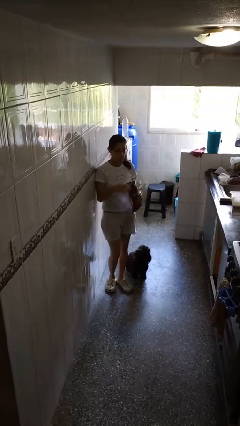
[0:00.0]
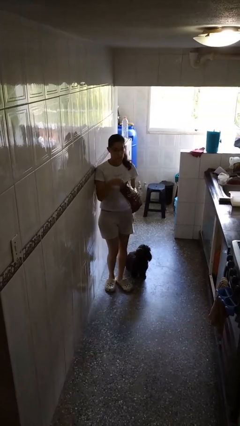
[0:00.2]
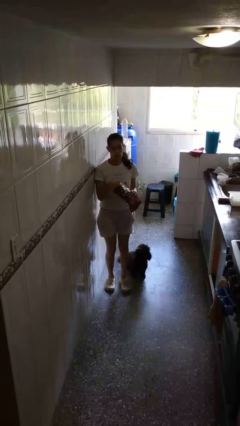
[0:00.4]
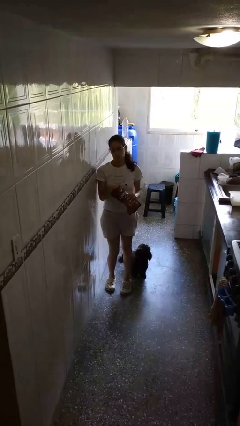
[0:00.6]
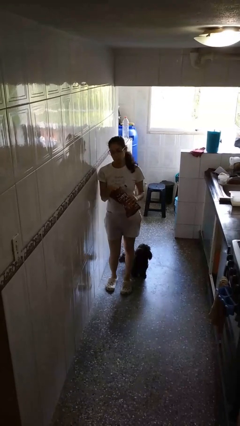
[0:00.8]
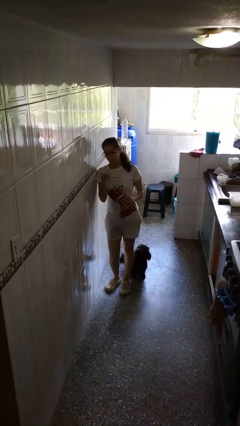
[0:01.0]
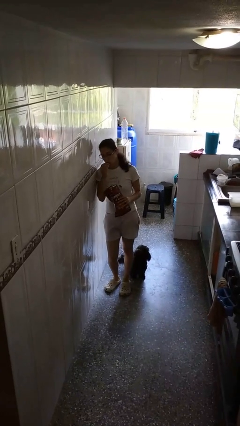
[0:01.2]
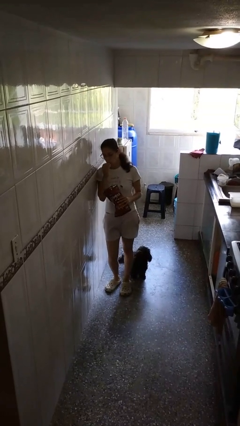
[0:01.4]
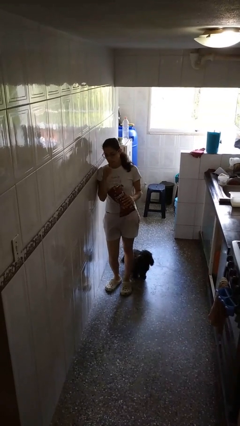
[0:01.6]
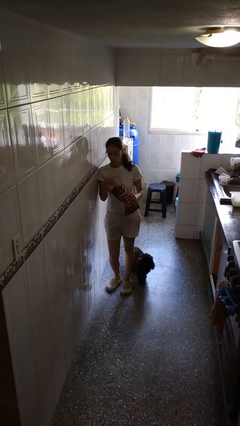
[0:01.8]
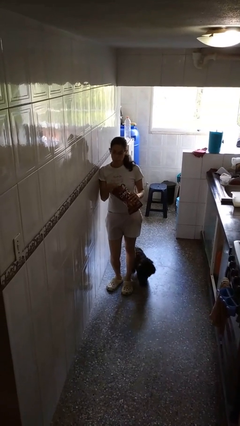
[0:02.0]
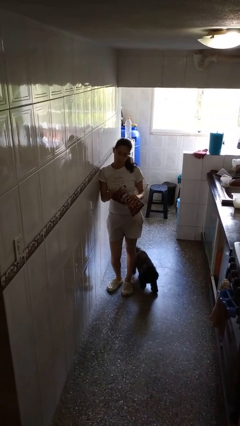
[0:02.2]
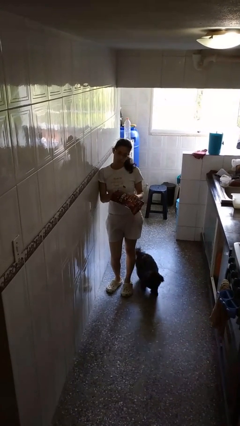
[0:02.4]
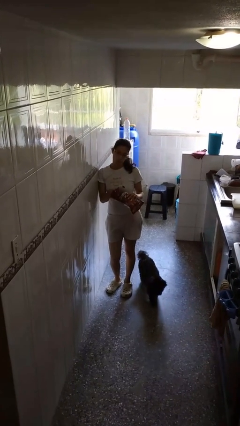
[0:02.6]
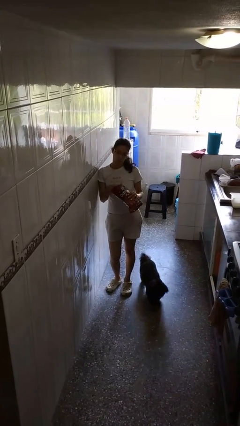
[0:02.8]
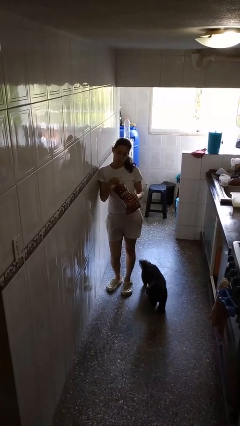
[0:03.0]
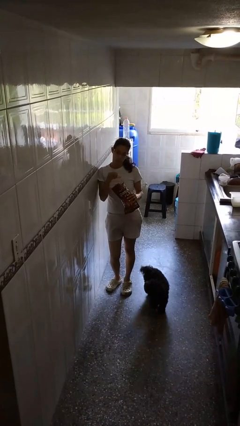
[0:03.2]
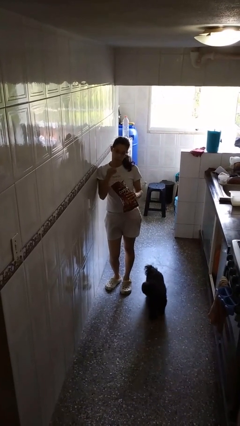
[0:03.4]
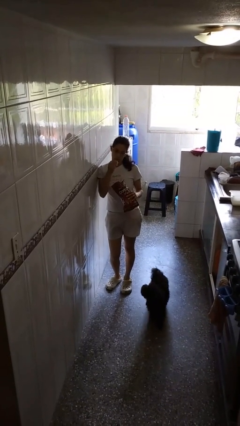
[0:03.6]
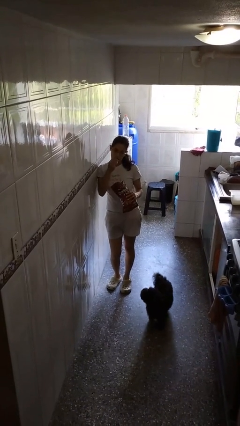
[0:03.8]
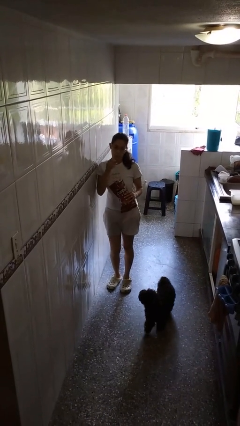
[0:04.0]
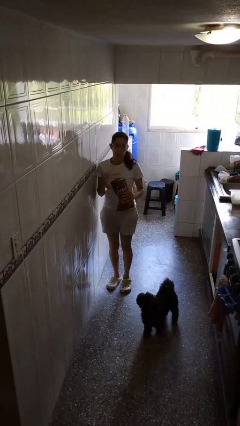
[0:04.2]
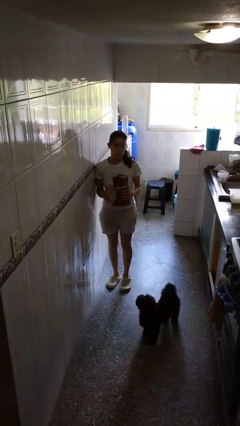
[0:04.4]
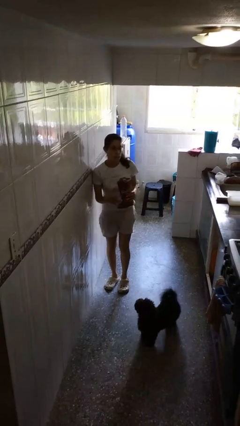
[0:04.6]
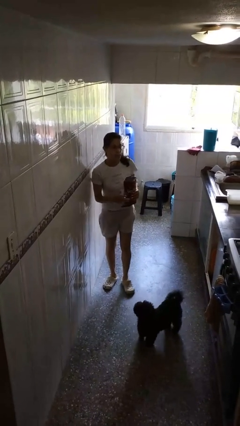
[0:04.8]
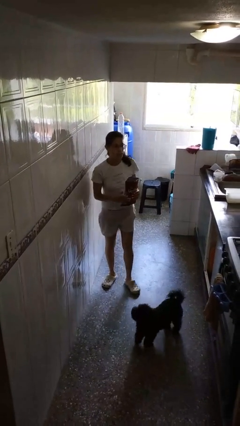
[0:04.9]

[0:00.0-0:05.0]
person eats snack from bag

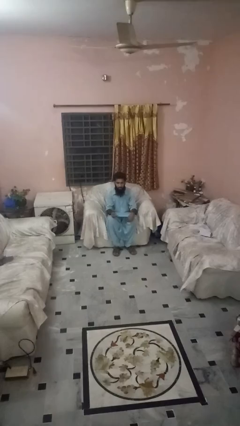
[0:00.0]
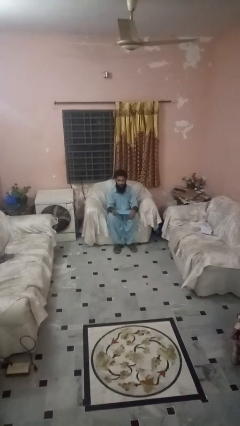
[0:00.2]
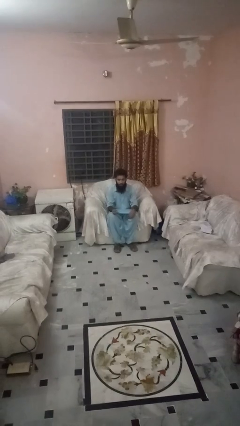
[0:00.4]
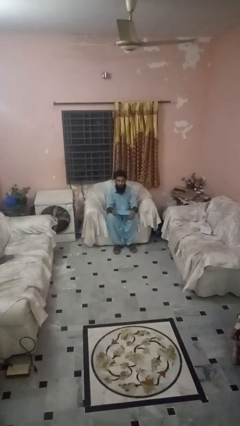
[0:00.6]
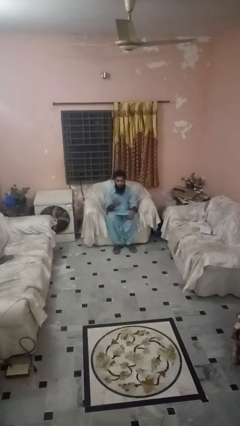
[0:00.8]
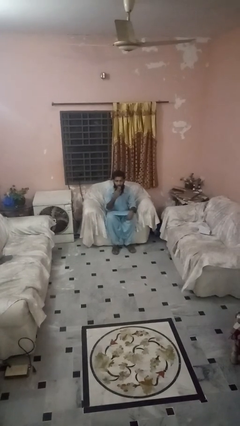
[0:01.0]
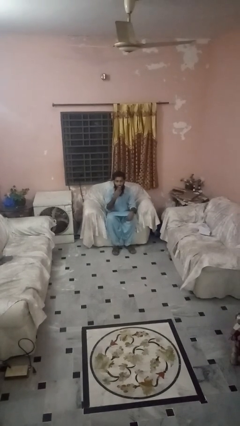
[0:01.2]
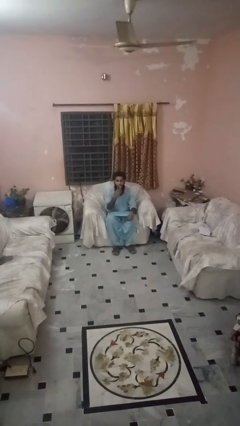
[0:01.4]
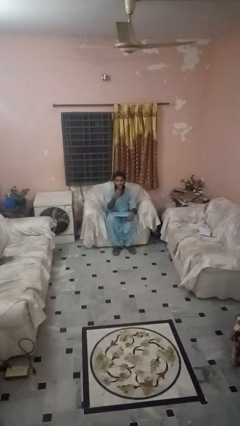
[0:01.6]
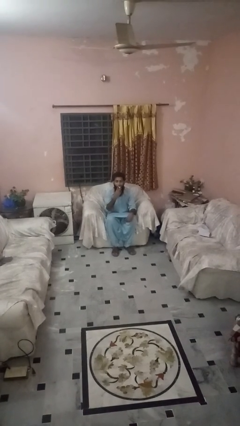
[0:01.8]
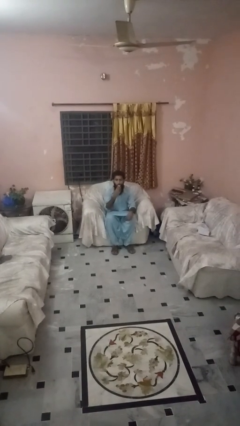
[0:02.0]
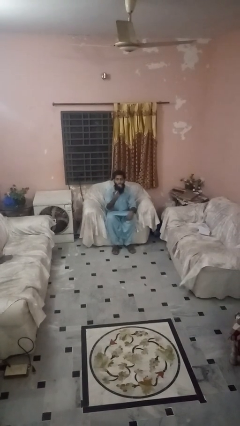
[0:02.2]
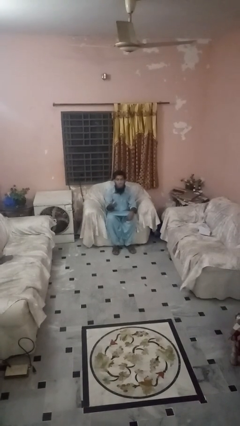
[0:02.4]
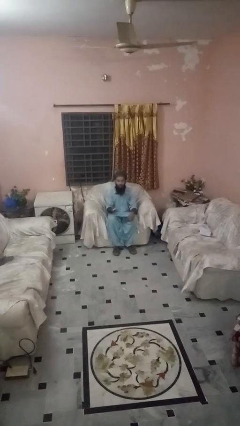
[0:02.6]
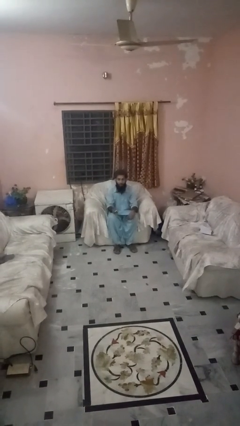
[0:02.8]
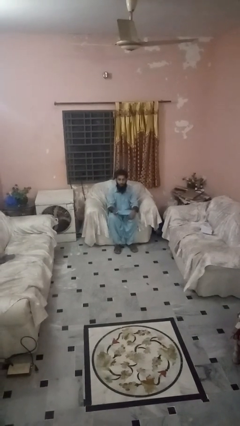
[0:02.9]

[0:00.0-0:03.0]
person vapes

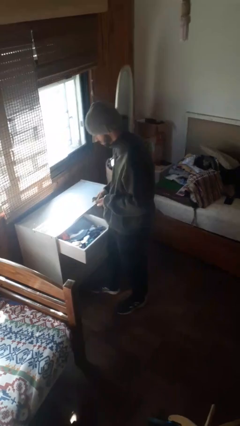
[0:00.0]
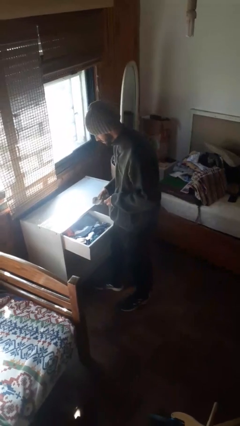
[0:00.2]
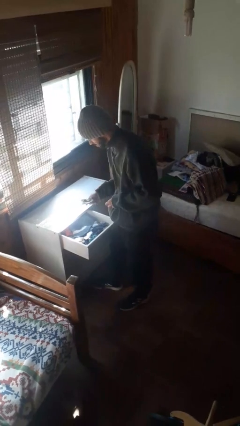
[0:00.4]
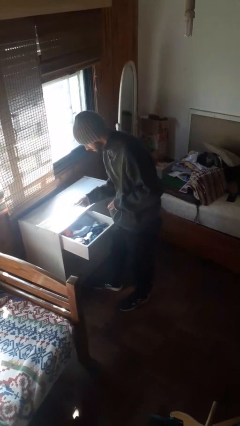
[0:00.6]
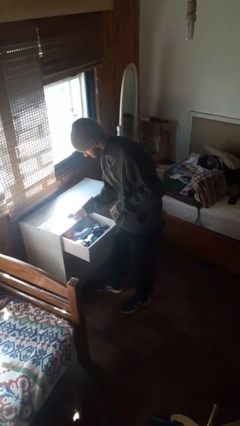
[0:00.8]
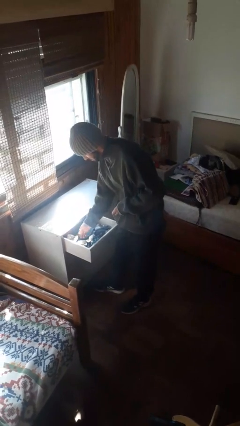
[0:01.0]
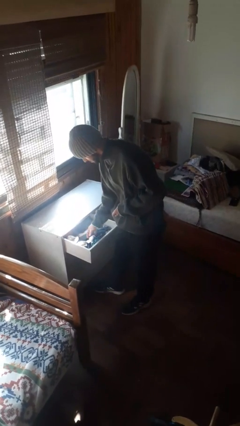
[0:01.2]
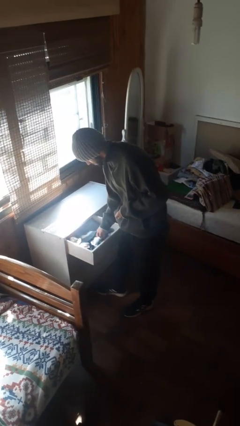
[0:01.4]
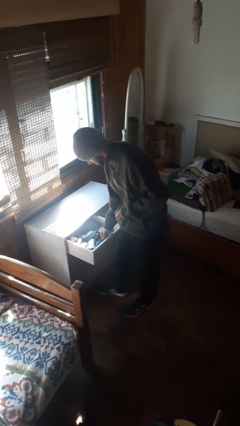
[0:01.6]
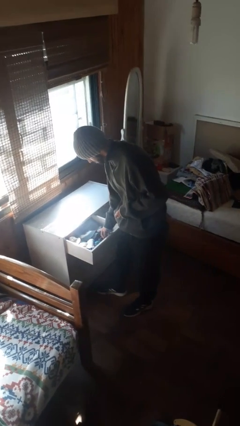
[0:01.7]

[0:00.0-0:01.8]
person puts clothes into dresser

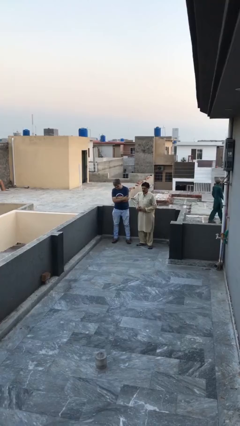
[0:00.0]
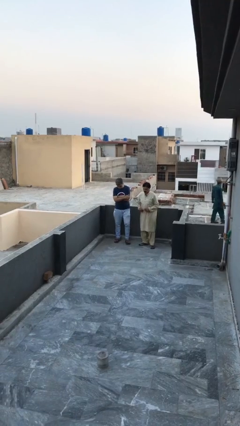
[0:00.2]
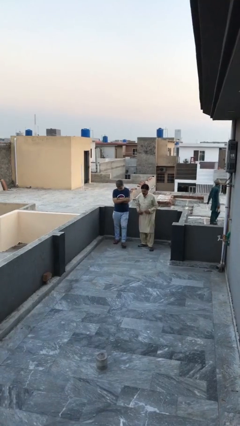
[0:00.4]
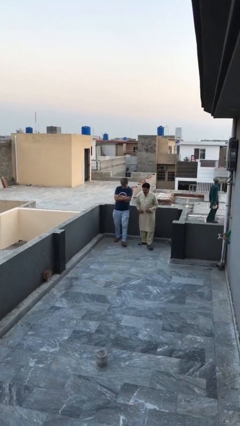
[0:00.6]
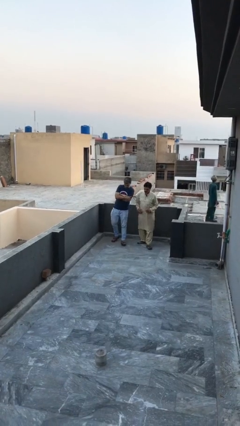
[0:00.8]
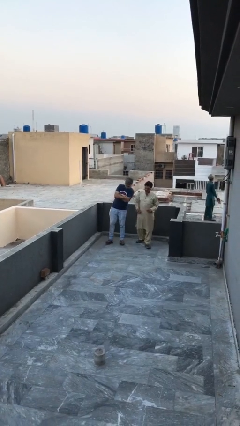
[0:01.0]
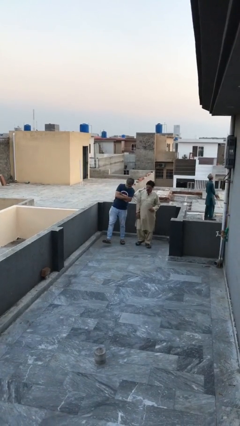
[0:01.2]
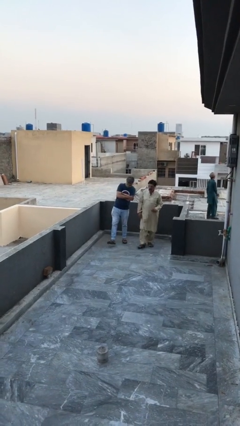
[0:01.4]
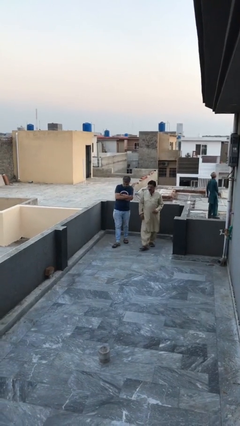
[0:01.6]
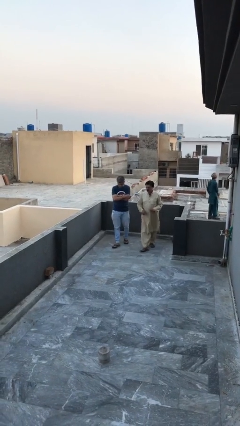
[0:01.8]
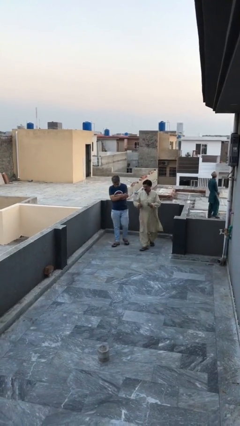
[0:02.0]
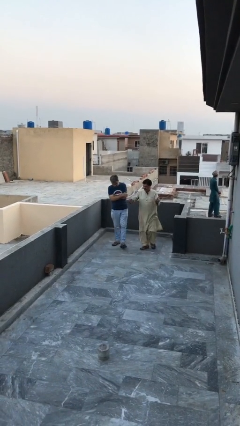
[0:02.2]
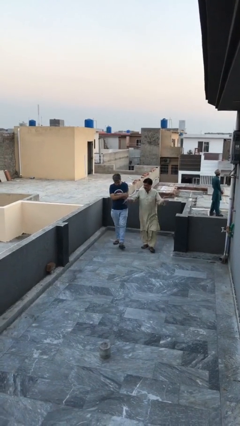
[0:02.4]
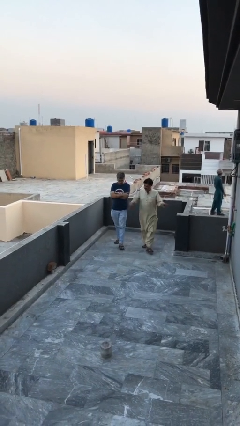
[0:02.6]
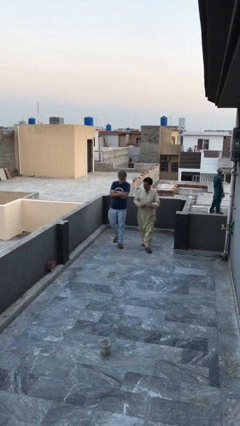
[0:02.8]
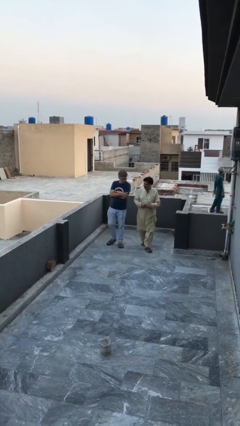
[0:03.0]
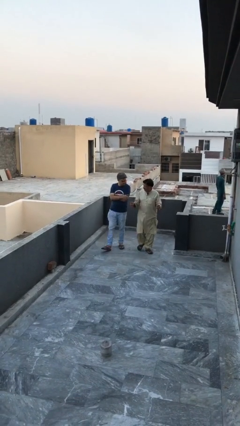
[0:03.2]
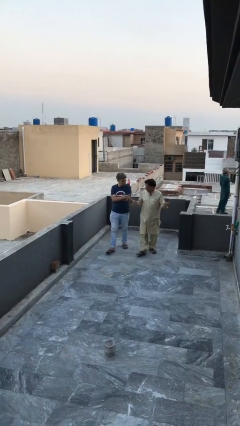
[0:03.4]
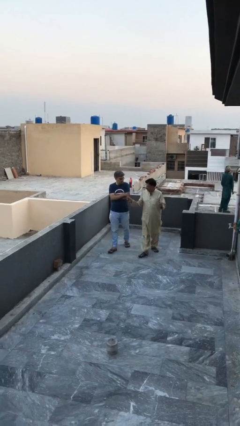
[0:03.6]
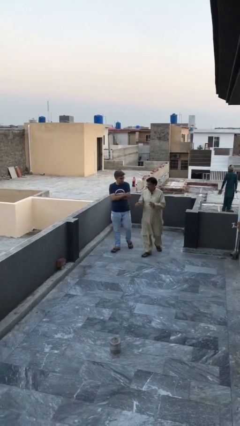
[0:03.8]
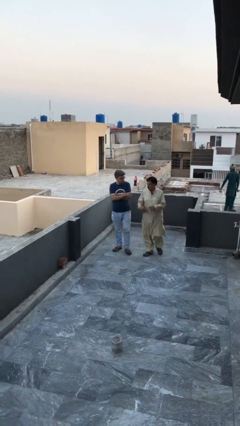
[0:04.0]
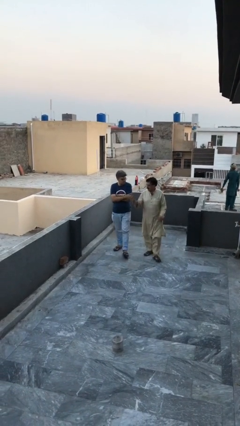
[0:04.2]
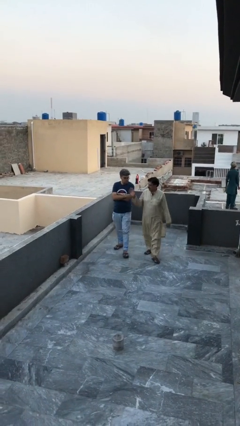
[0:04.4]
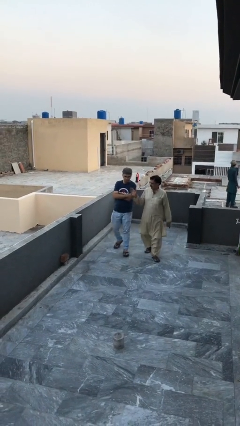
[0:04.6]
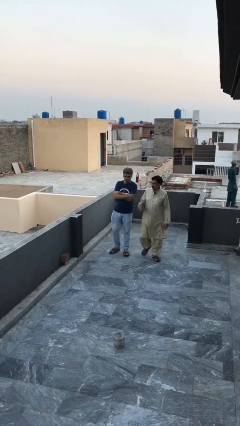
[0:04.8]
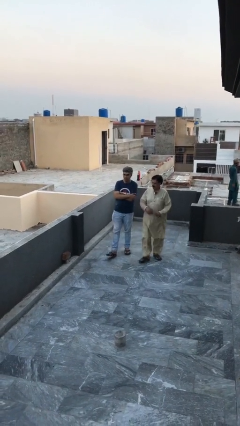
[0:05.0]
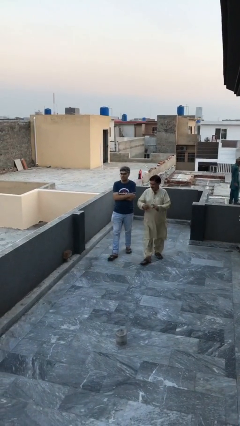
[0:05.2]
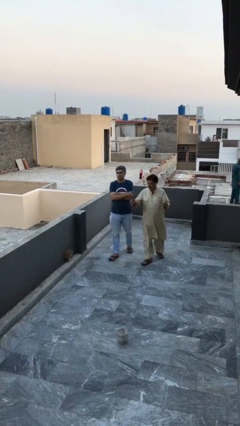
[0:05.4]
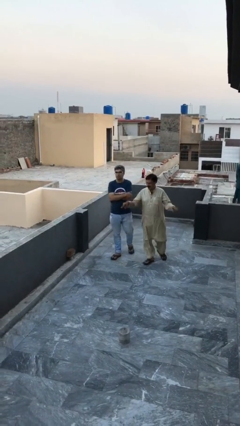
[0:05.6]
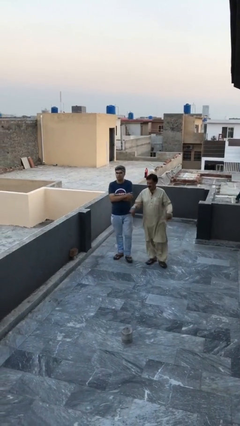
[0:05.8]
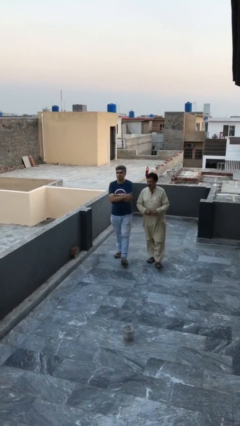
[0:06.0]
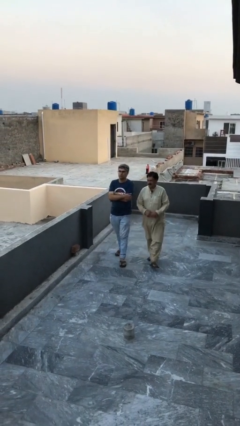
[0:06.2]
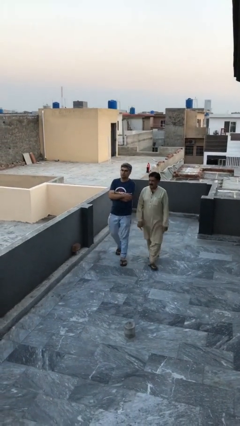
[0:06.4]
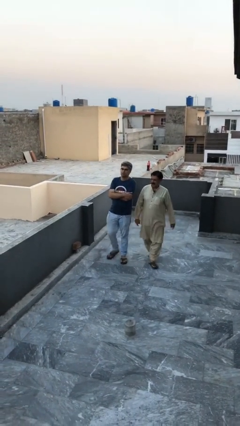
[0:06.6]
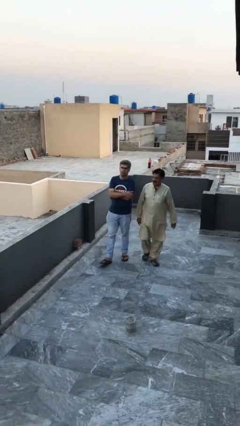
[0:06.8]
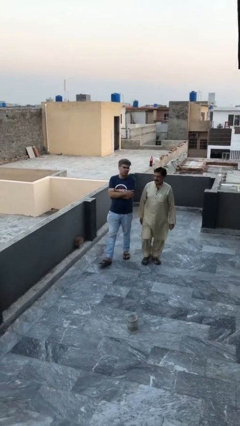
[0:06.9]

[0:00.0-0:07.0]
person talks to person

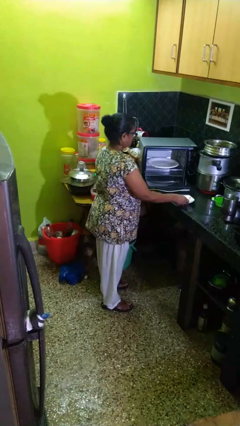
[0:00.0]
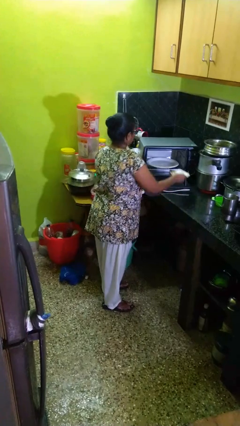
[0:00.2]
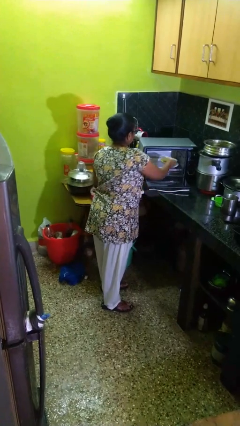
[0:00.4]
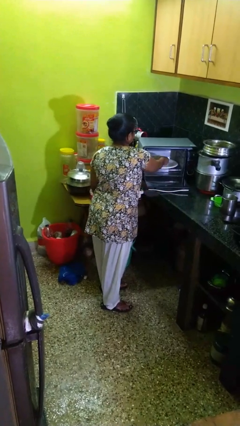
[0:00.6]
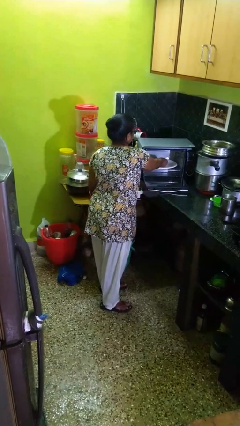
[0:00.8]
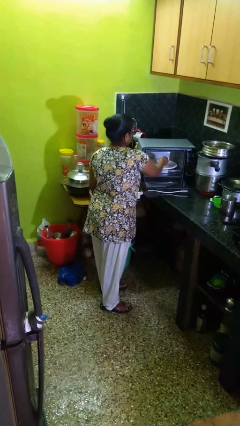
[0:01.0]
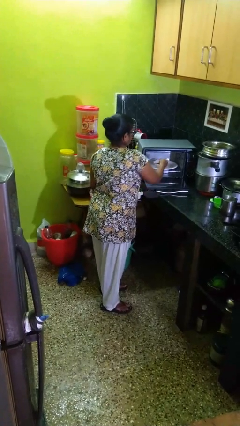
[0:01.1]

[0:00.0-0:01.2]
person puts object into microwave
